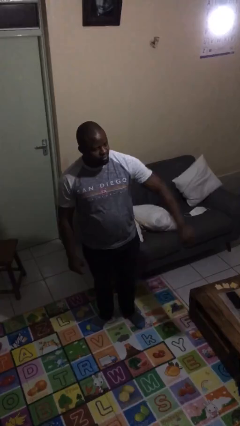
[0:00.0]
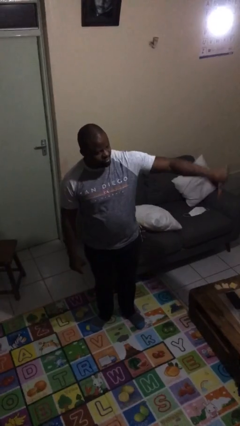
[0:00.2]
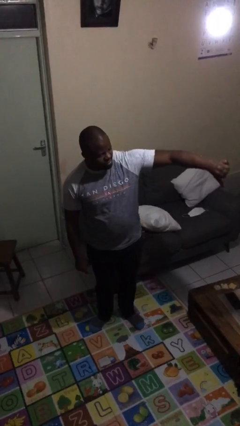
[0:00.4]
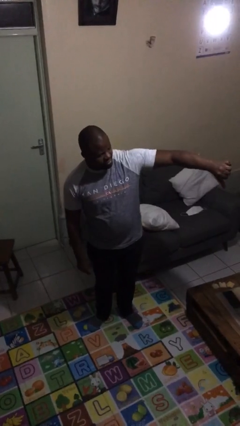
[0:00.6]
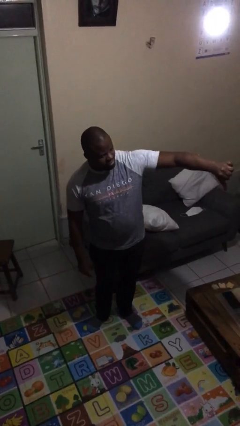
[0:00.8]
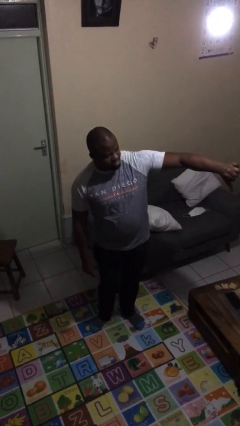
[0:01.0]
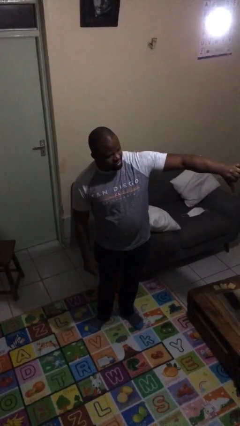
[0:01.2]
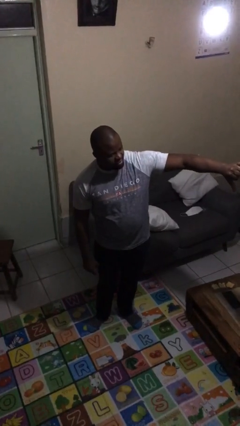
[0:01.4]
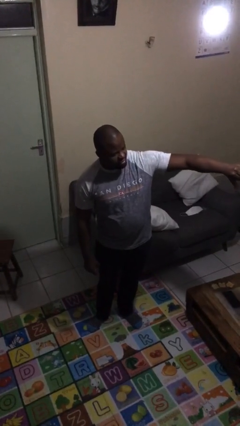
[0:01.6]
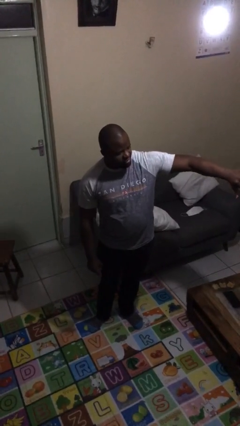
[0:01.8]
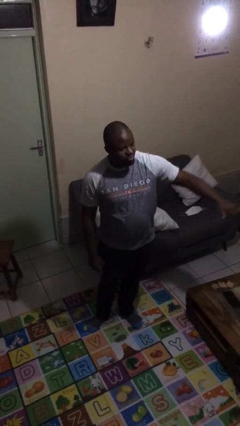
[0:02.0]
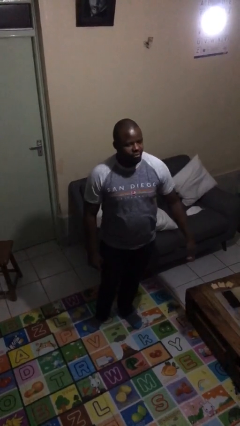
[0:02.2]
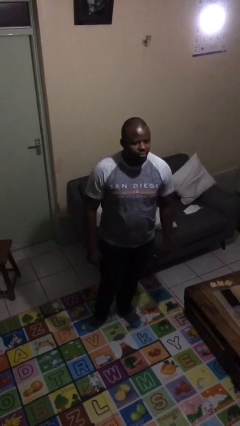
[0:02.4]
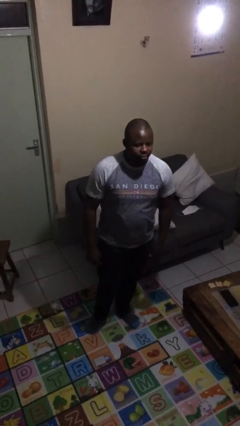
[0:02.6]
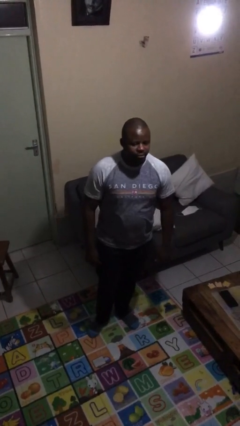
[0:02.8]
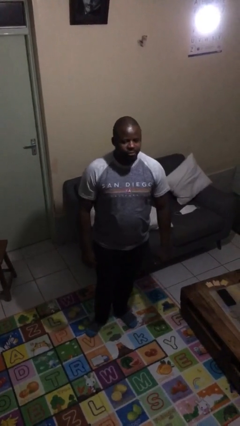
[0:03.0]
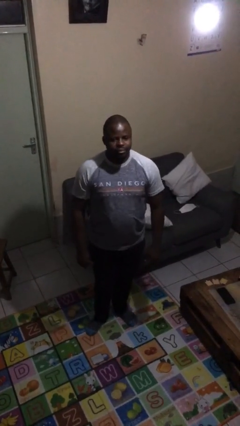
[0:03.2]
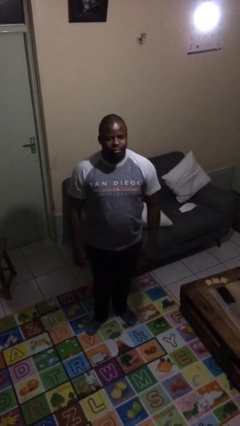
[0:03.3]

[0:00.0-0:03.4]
person gestures thumbs down

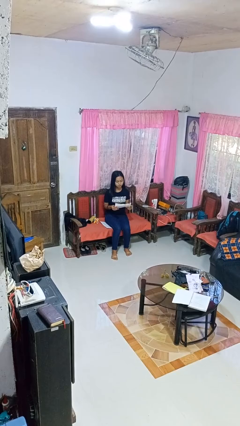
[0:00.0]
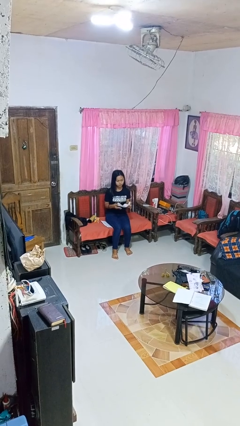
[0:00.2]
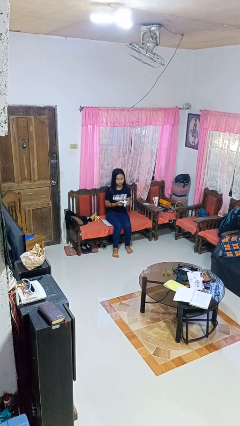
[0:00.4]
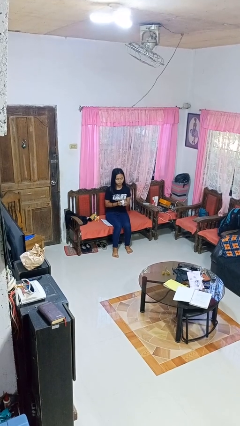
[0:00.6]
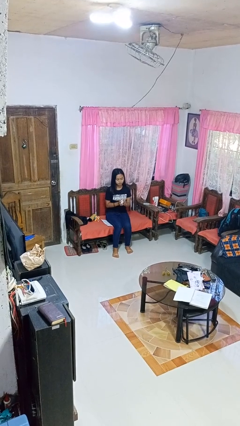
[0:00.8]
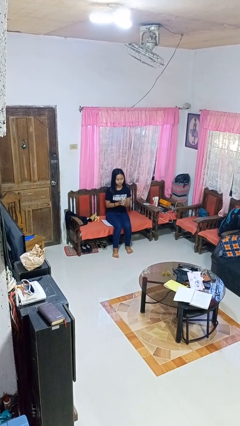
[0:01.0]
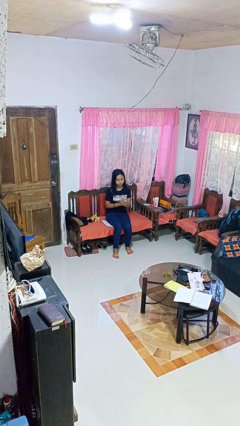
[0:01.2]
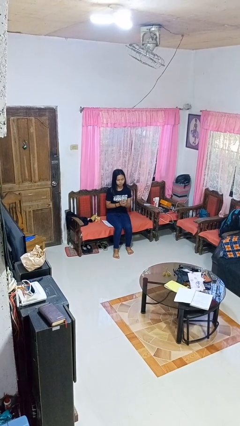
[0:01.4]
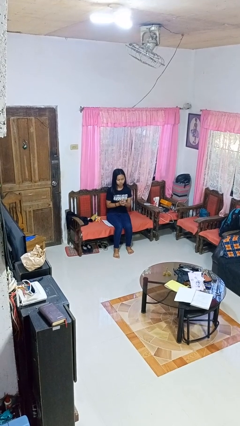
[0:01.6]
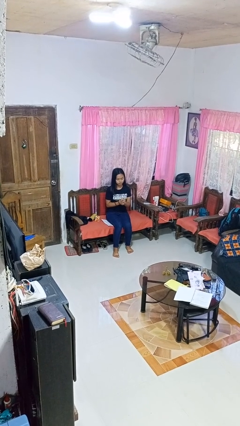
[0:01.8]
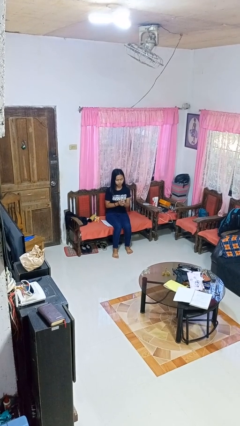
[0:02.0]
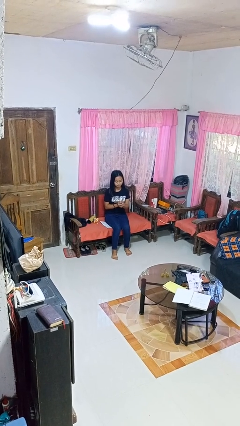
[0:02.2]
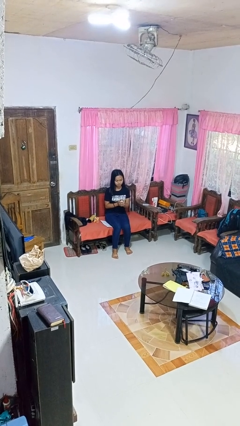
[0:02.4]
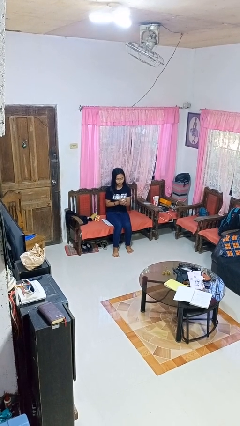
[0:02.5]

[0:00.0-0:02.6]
person crumples paper

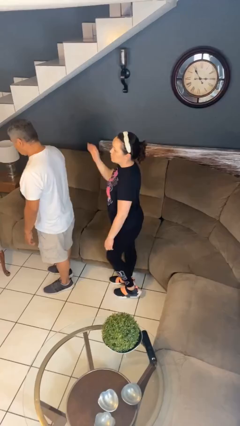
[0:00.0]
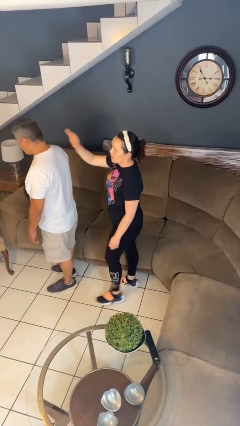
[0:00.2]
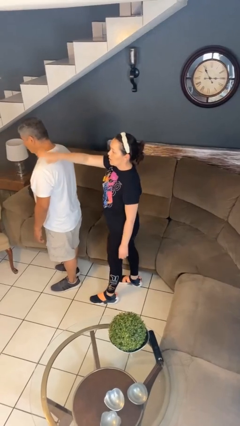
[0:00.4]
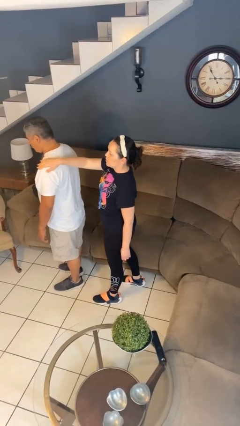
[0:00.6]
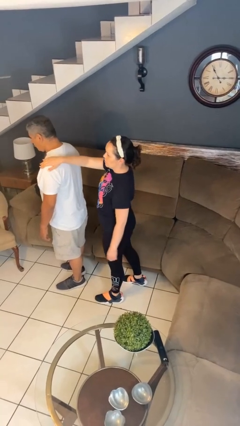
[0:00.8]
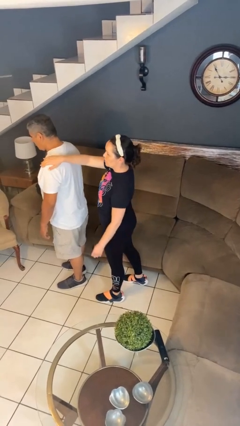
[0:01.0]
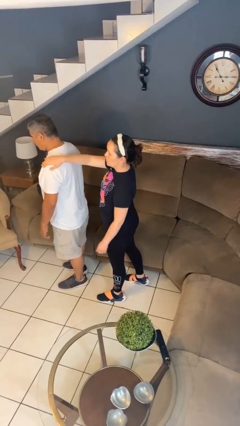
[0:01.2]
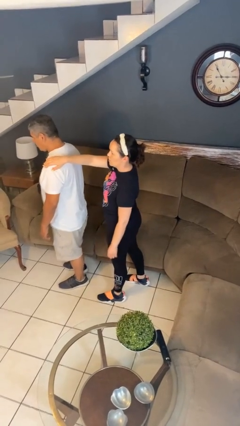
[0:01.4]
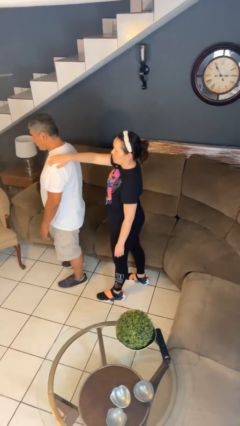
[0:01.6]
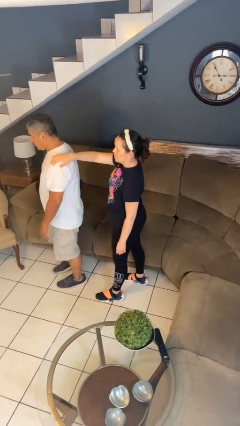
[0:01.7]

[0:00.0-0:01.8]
person grabs person by shoulder

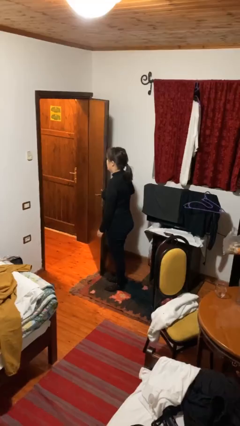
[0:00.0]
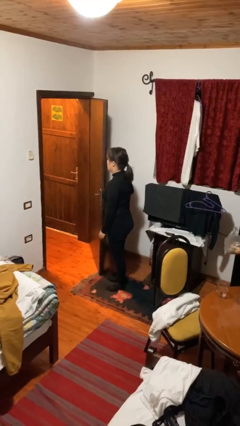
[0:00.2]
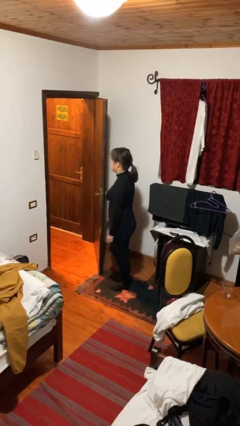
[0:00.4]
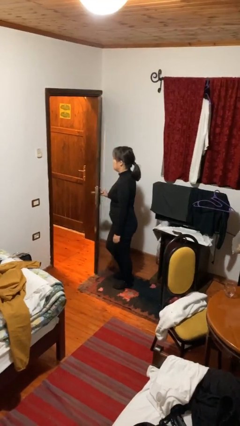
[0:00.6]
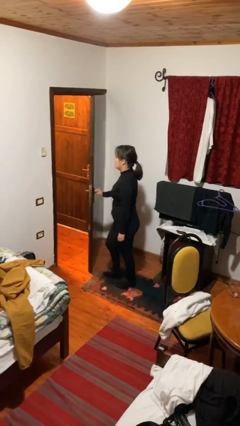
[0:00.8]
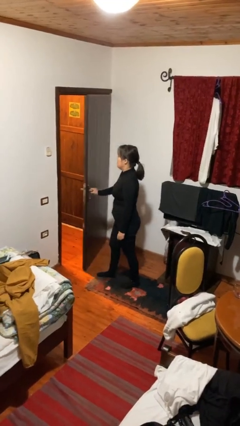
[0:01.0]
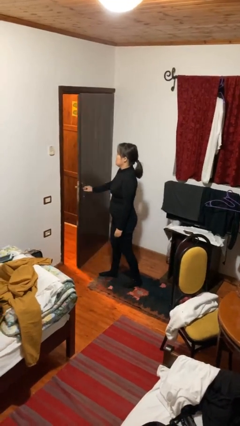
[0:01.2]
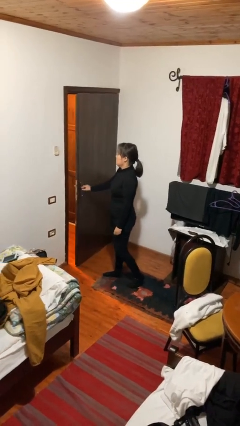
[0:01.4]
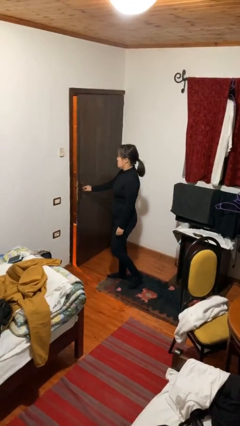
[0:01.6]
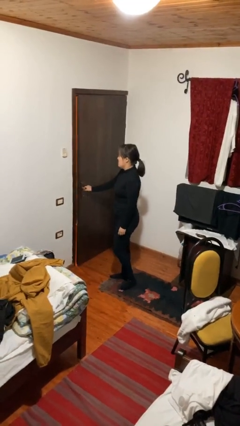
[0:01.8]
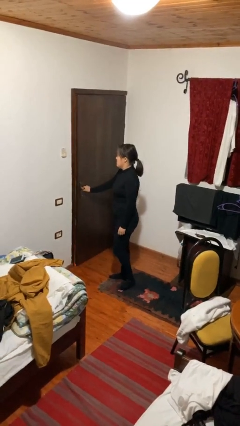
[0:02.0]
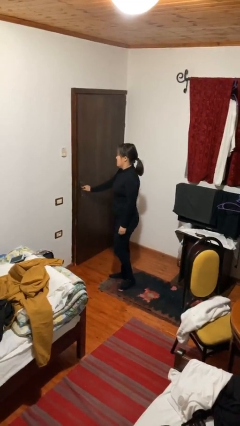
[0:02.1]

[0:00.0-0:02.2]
person closes facility door

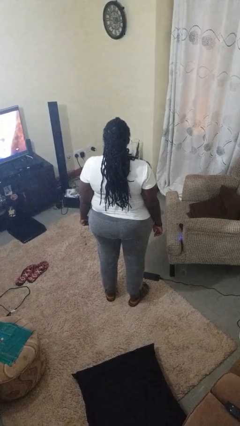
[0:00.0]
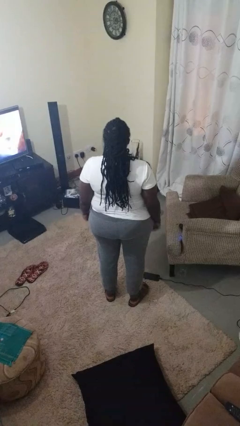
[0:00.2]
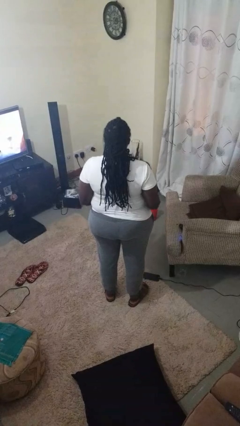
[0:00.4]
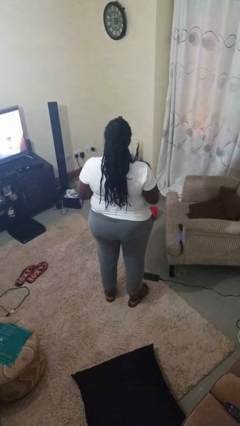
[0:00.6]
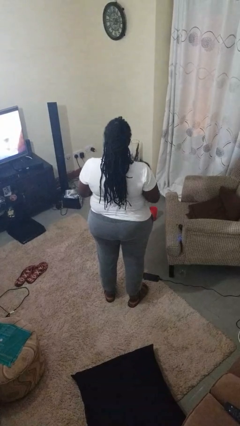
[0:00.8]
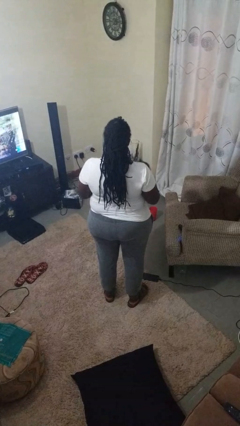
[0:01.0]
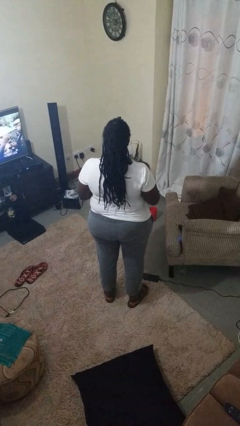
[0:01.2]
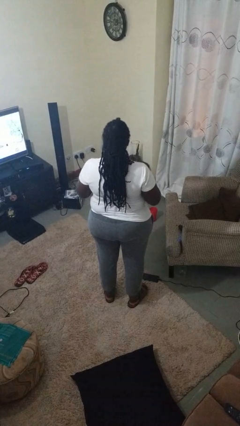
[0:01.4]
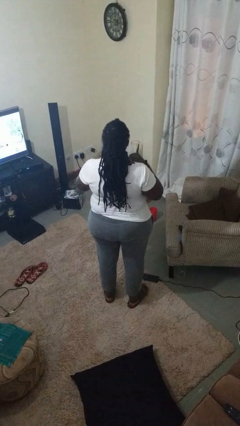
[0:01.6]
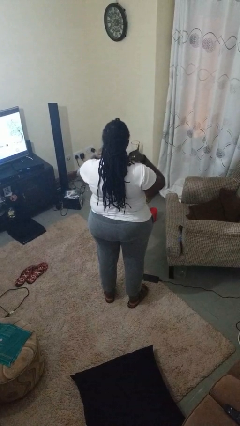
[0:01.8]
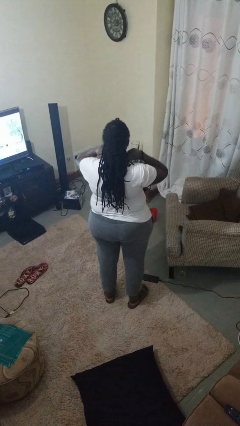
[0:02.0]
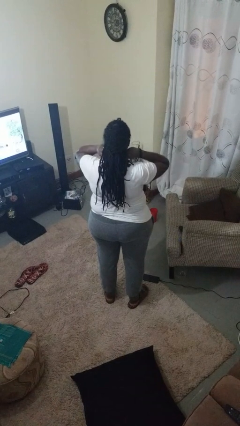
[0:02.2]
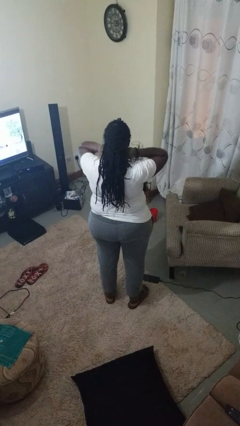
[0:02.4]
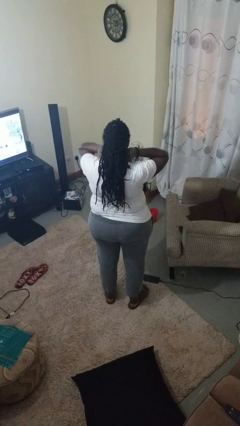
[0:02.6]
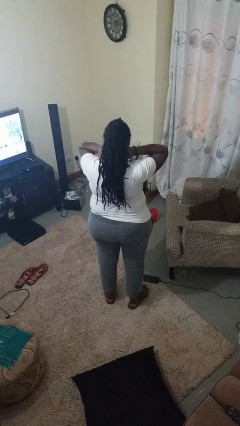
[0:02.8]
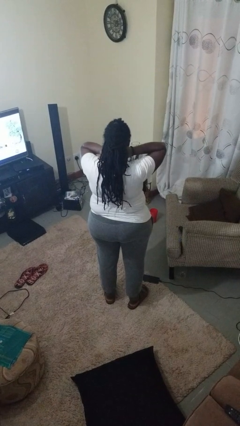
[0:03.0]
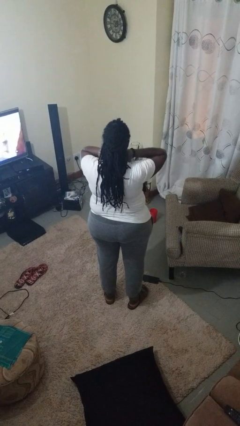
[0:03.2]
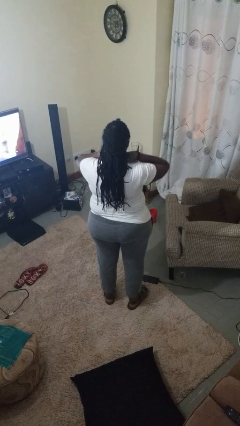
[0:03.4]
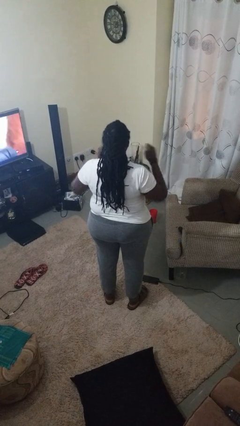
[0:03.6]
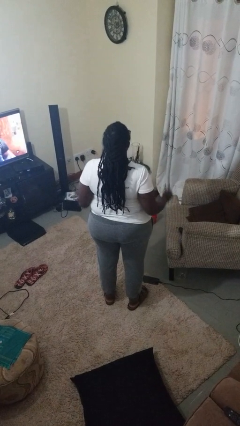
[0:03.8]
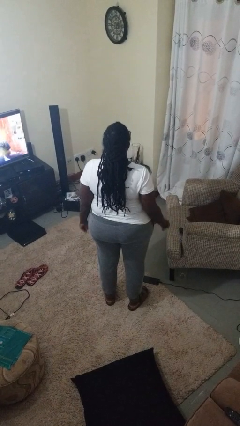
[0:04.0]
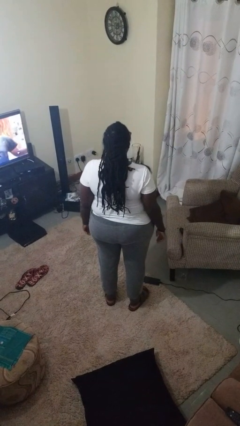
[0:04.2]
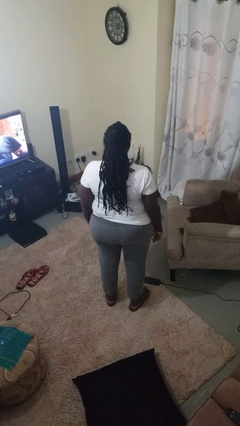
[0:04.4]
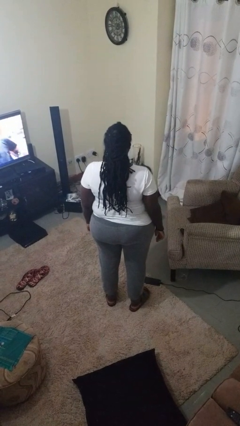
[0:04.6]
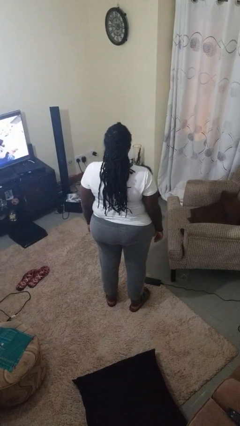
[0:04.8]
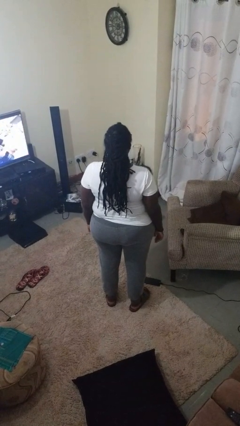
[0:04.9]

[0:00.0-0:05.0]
person puts on necklace

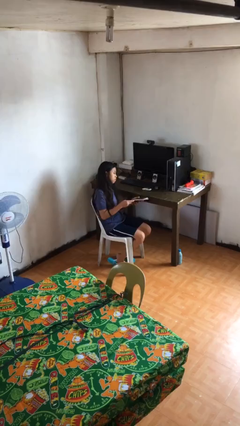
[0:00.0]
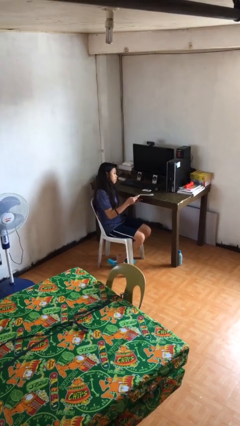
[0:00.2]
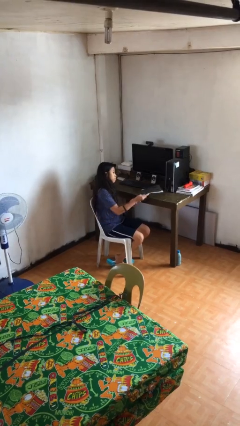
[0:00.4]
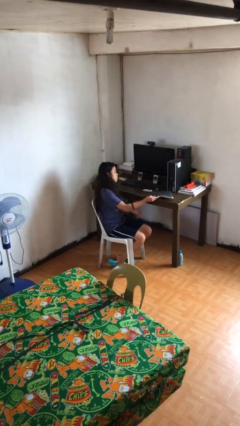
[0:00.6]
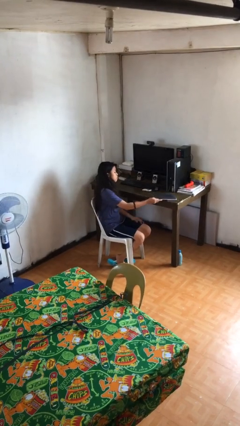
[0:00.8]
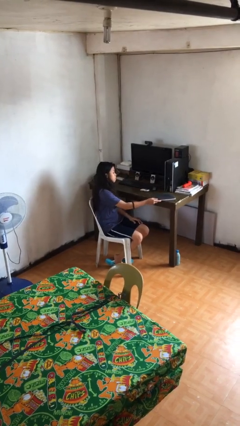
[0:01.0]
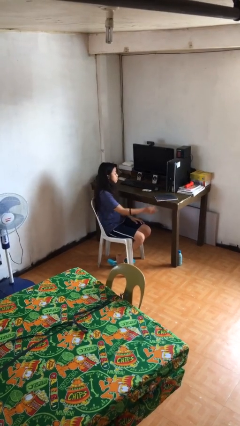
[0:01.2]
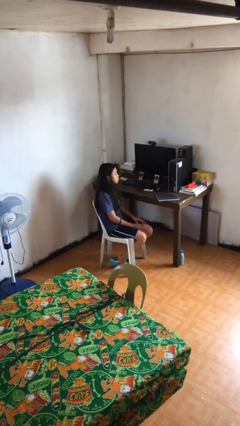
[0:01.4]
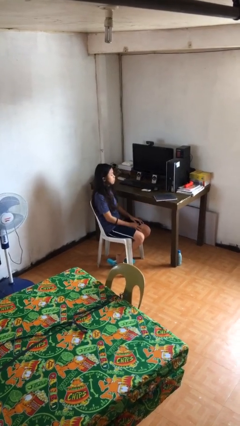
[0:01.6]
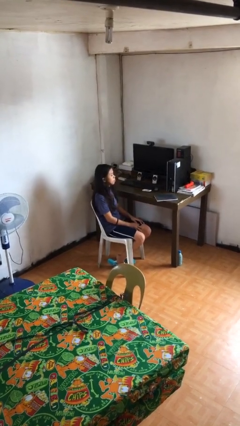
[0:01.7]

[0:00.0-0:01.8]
person puts down object on table

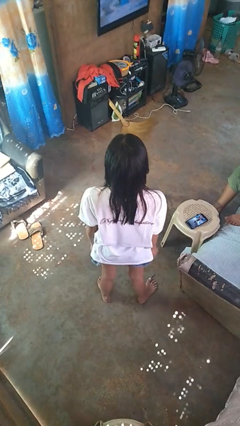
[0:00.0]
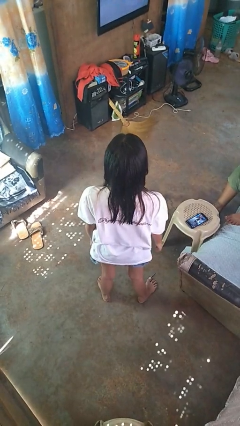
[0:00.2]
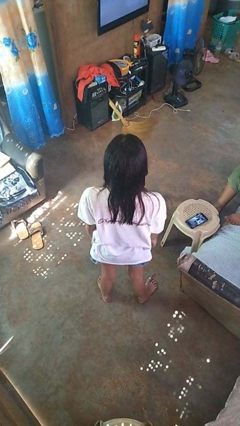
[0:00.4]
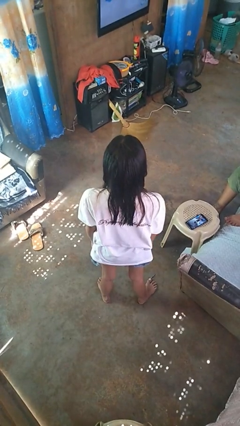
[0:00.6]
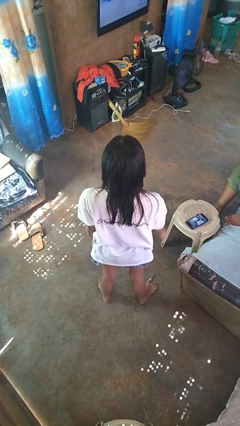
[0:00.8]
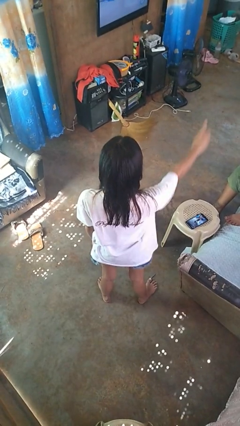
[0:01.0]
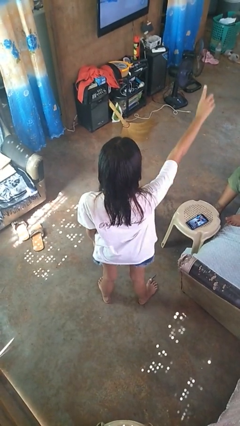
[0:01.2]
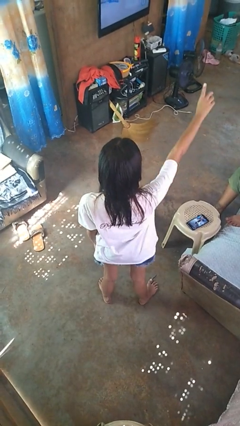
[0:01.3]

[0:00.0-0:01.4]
person gestures number three
